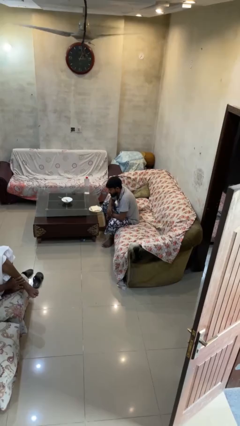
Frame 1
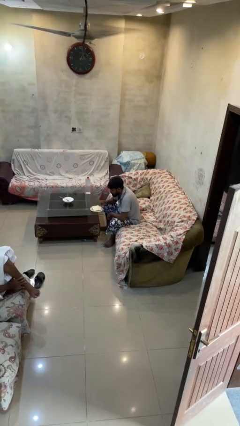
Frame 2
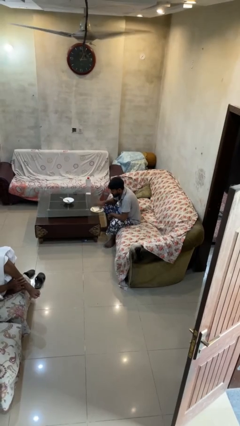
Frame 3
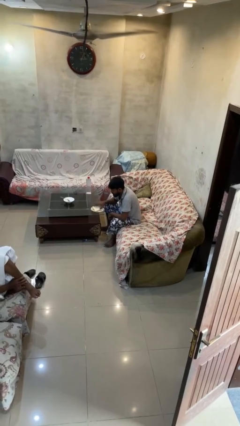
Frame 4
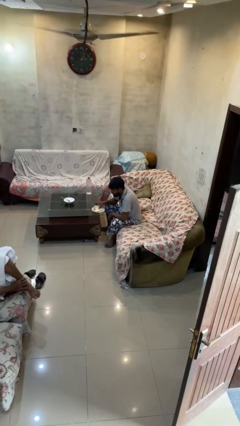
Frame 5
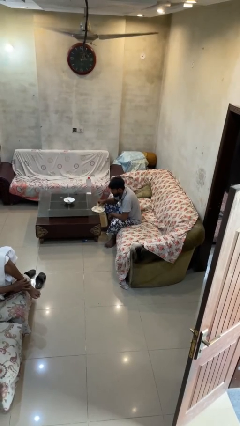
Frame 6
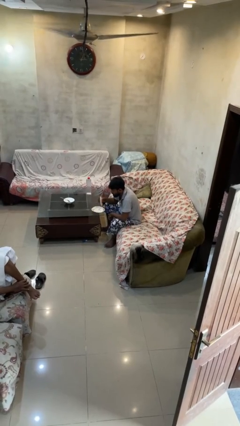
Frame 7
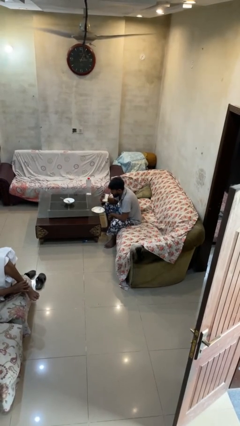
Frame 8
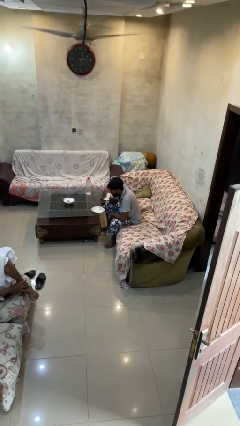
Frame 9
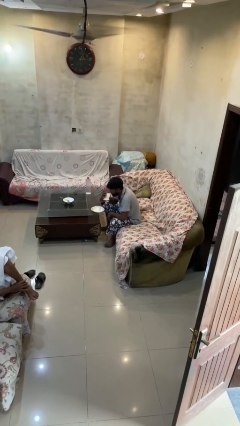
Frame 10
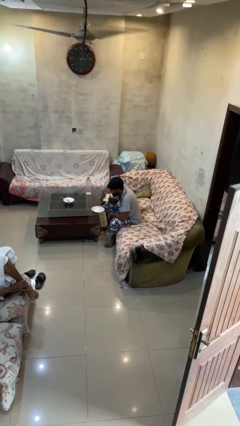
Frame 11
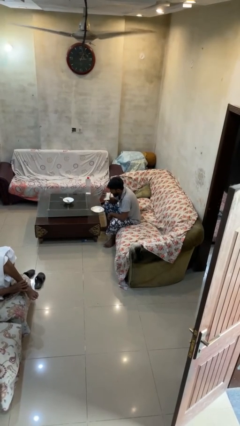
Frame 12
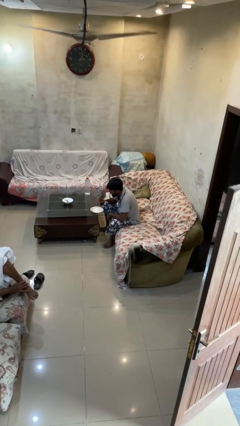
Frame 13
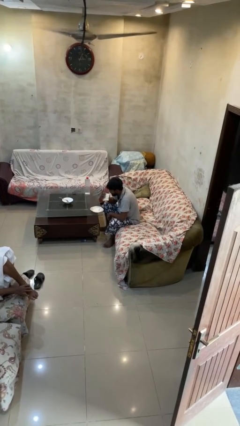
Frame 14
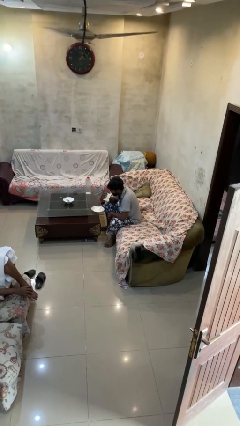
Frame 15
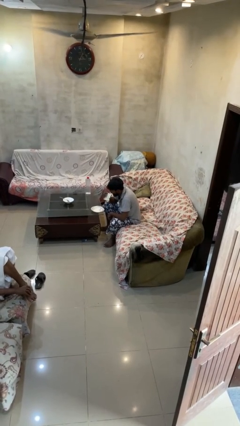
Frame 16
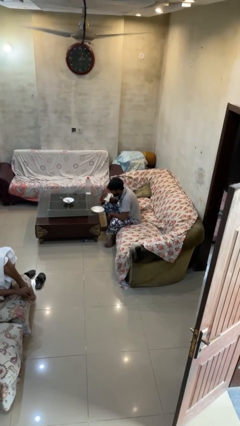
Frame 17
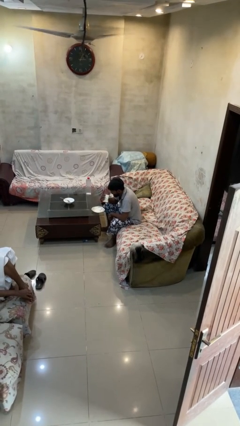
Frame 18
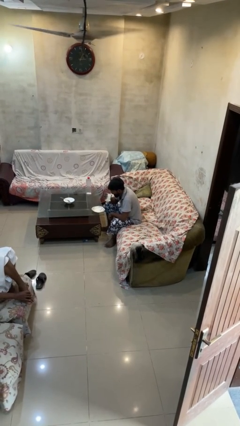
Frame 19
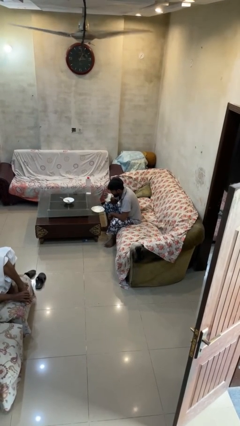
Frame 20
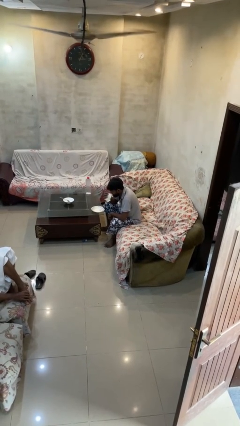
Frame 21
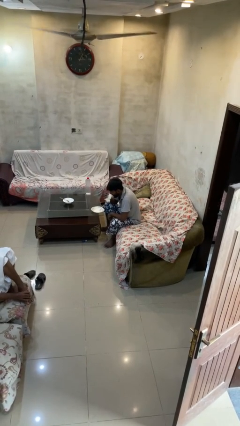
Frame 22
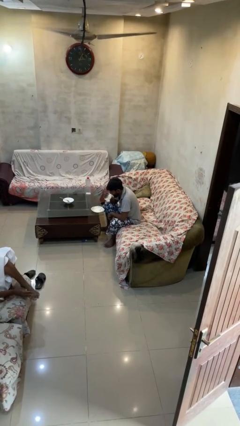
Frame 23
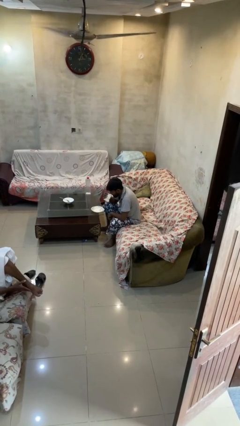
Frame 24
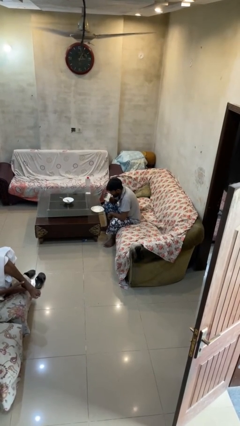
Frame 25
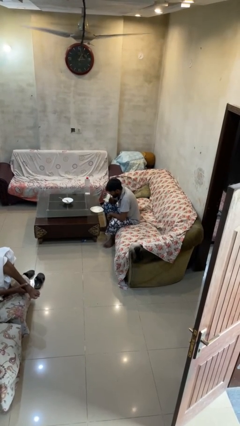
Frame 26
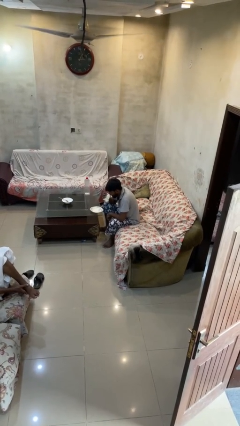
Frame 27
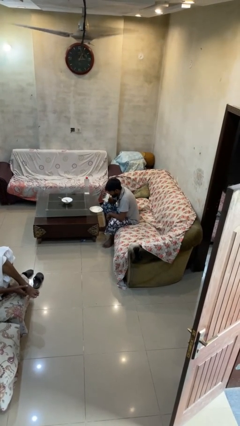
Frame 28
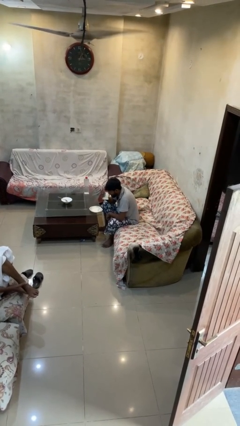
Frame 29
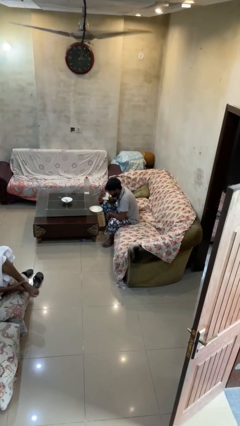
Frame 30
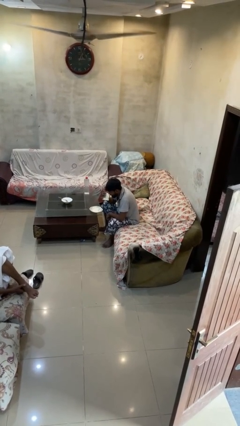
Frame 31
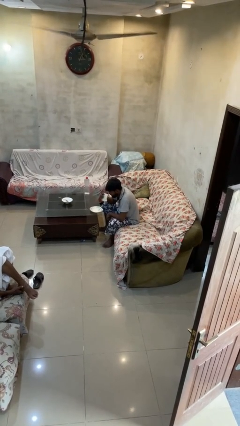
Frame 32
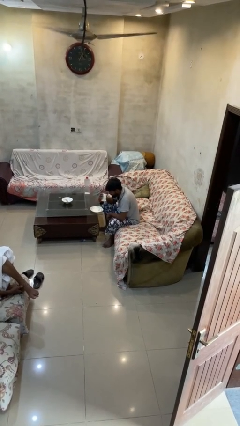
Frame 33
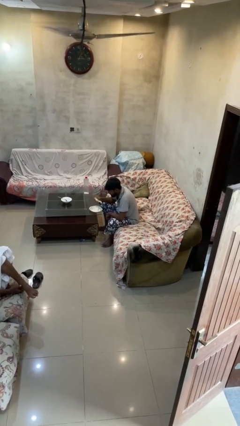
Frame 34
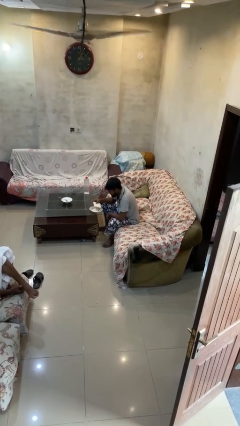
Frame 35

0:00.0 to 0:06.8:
person eats with hands

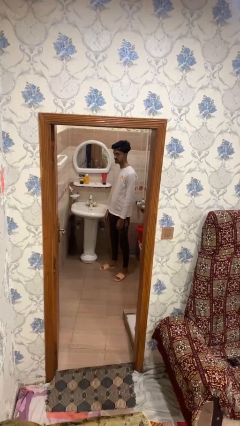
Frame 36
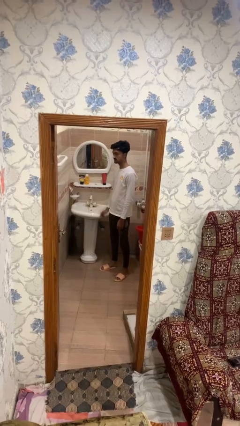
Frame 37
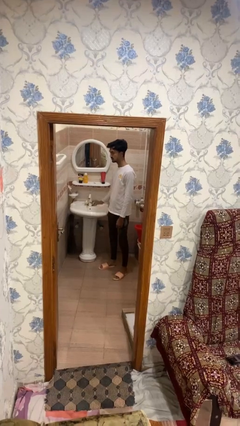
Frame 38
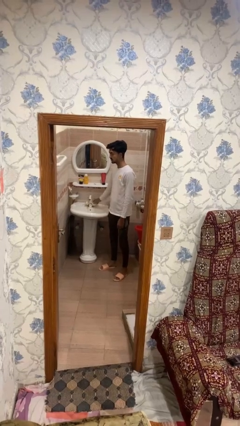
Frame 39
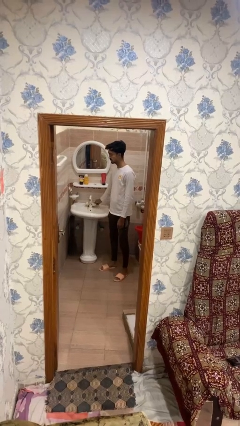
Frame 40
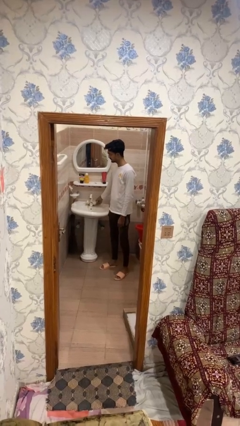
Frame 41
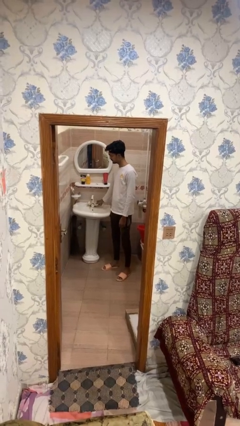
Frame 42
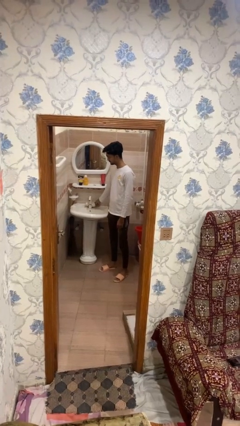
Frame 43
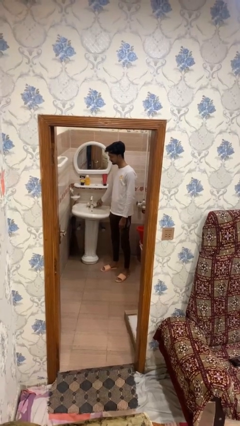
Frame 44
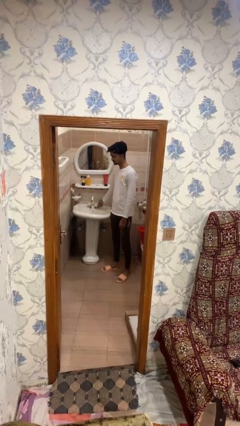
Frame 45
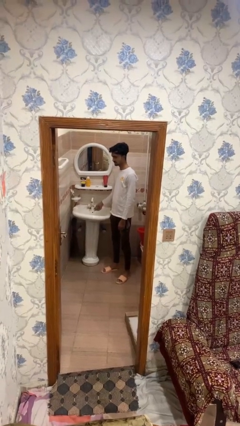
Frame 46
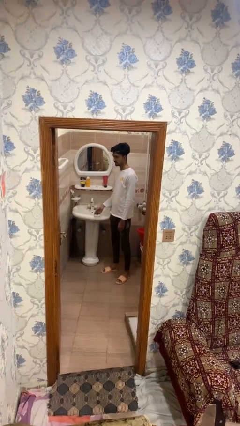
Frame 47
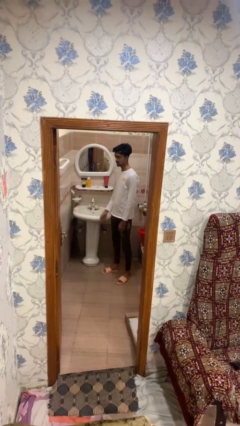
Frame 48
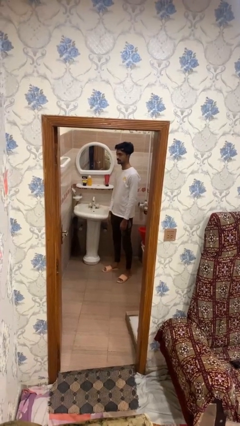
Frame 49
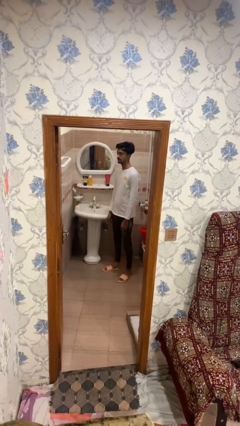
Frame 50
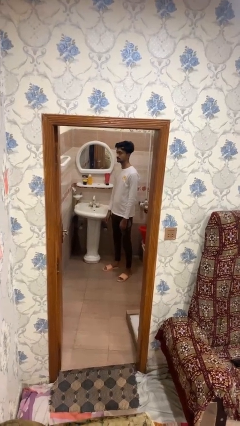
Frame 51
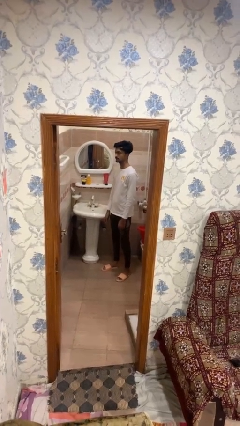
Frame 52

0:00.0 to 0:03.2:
person turns off faucet

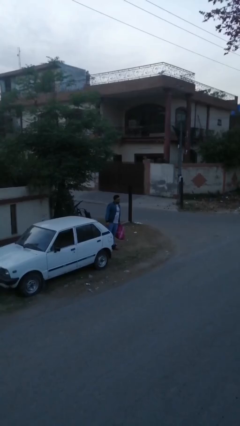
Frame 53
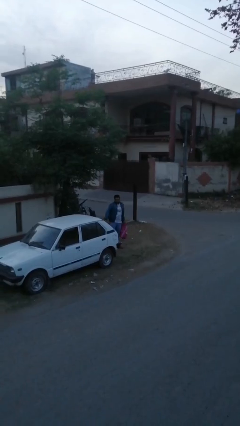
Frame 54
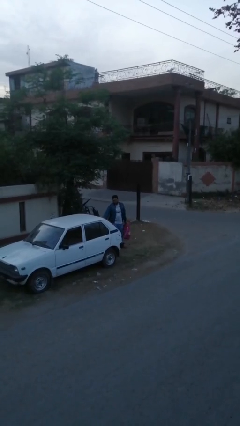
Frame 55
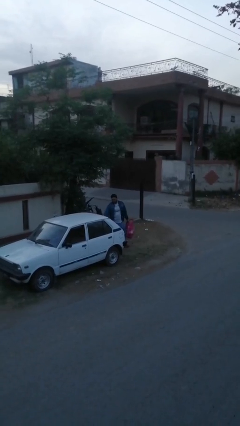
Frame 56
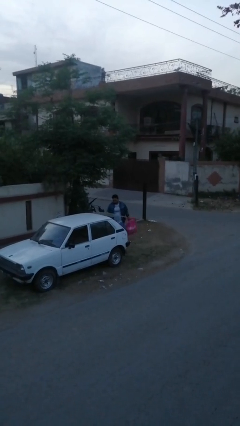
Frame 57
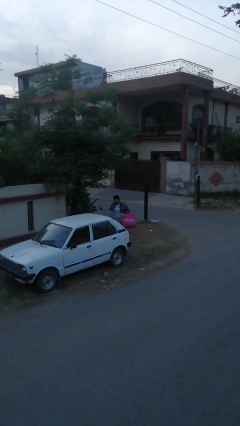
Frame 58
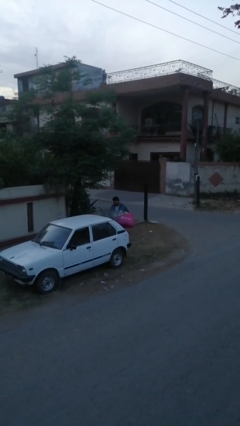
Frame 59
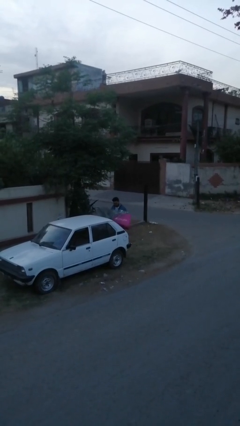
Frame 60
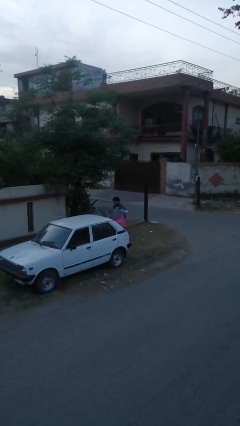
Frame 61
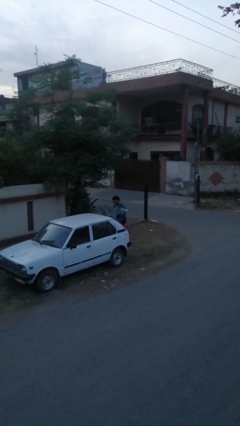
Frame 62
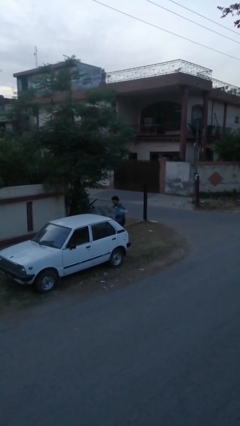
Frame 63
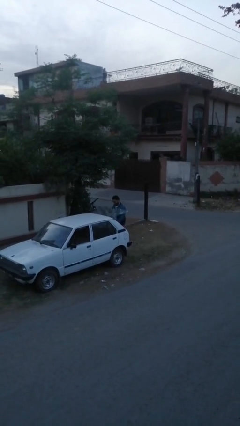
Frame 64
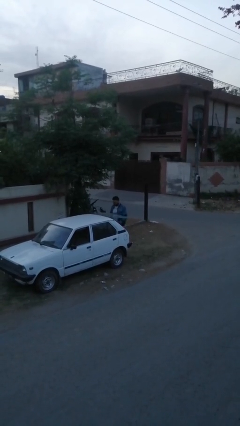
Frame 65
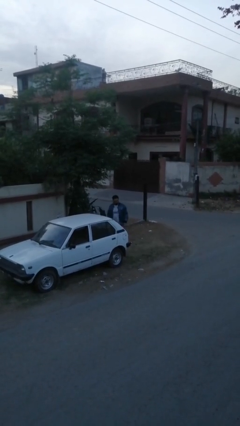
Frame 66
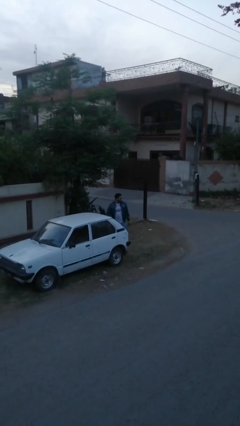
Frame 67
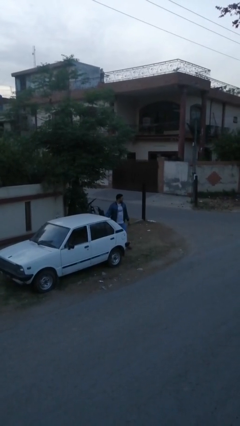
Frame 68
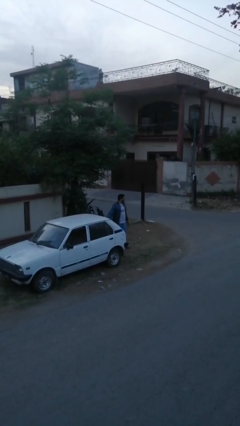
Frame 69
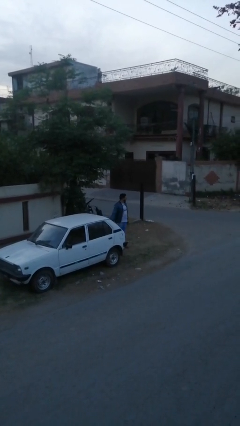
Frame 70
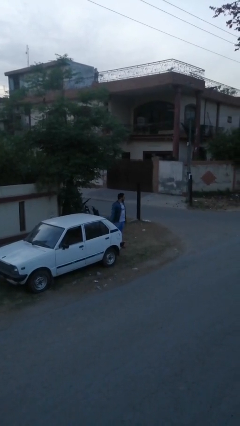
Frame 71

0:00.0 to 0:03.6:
person loads car

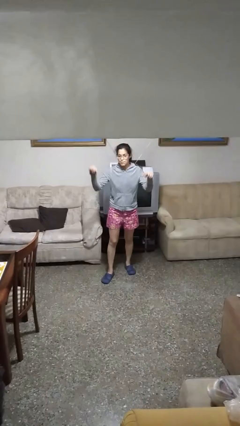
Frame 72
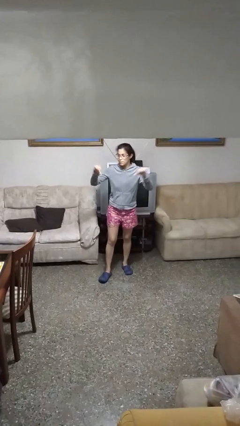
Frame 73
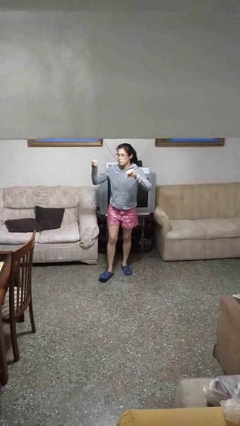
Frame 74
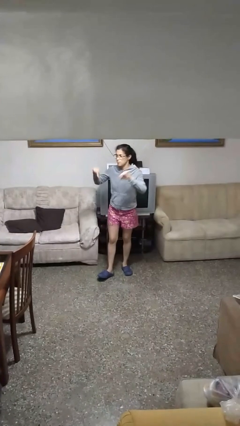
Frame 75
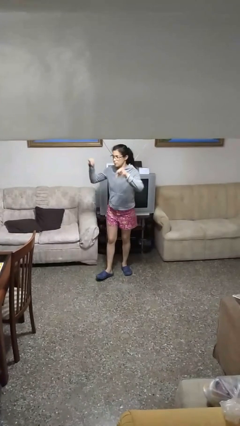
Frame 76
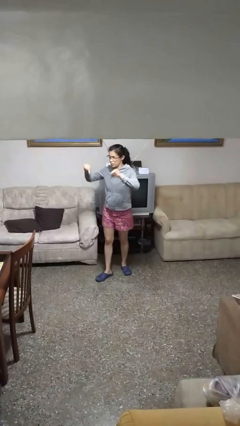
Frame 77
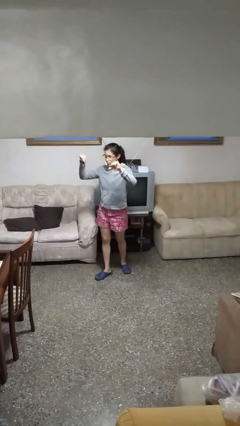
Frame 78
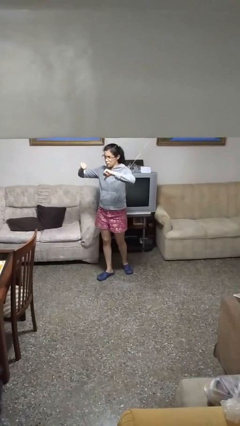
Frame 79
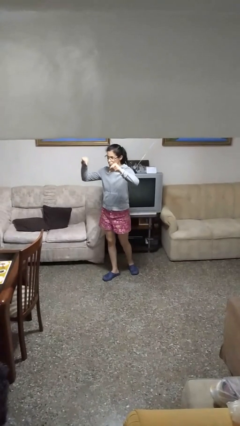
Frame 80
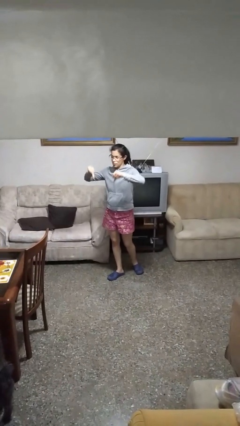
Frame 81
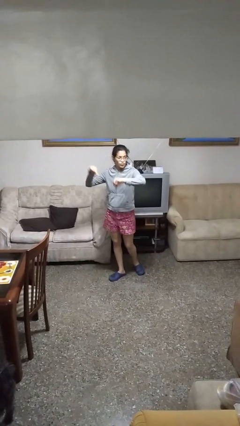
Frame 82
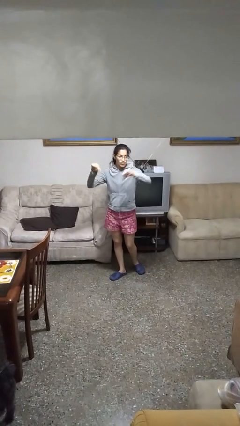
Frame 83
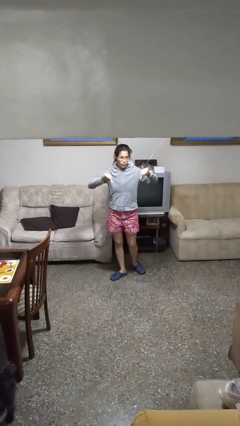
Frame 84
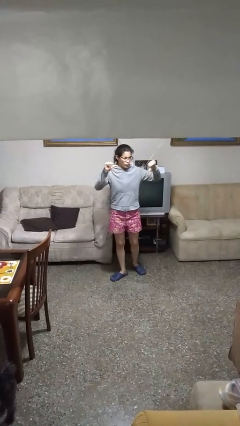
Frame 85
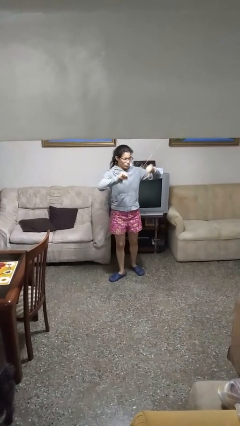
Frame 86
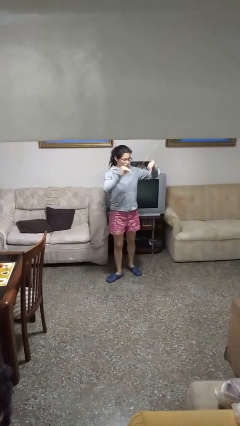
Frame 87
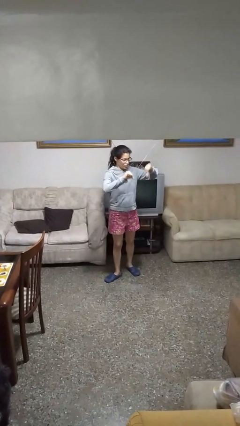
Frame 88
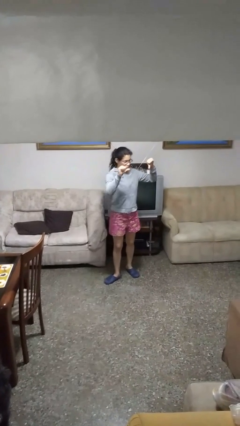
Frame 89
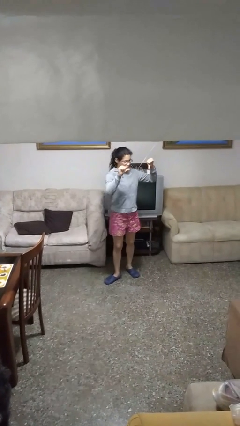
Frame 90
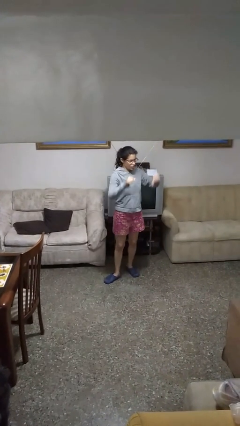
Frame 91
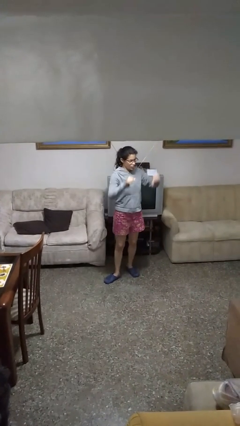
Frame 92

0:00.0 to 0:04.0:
person gestures thumbs down
